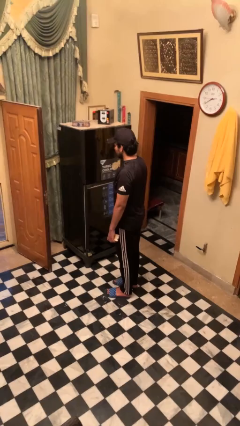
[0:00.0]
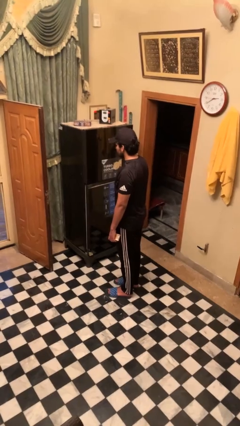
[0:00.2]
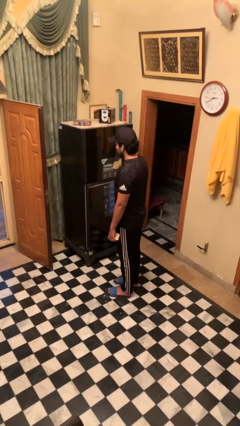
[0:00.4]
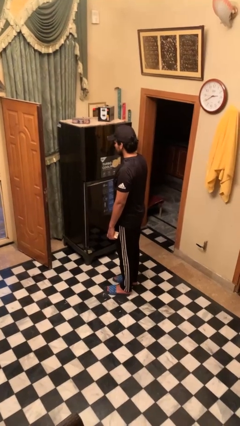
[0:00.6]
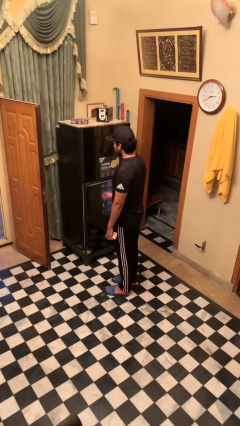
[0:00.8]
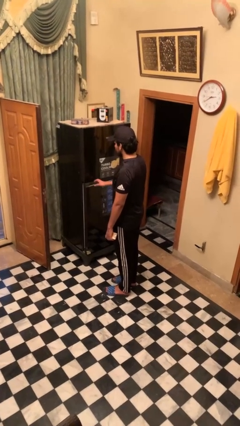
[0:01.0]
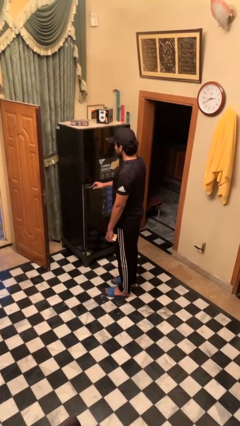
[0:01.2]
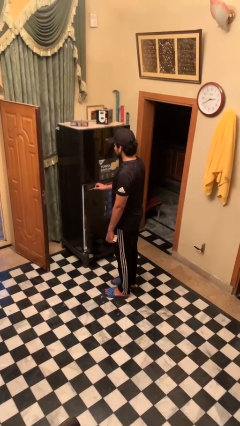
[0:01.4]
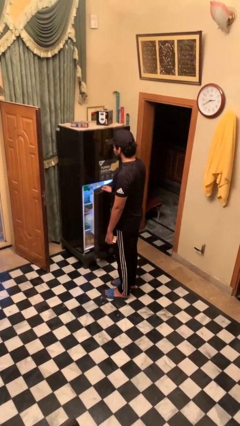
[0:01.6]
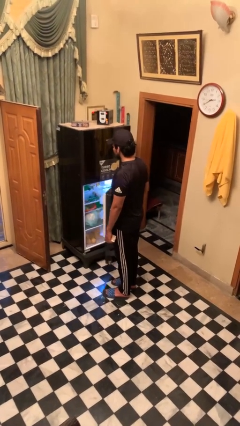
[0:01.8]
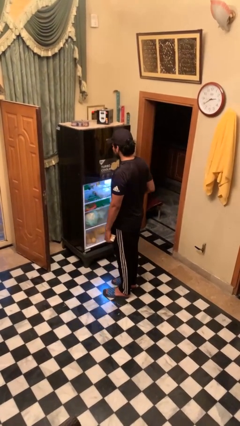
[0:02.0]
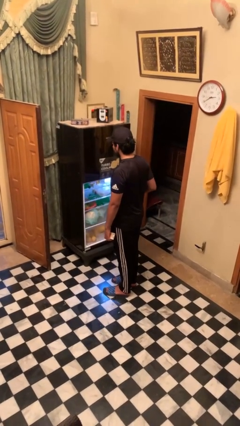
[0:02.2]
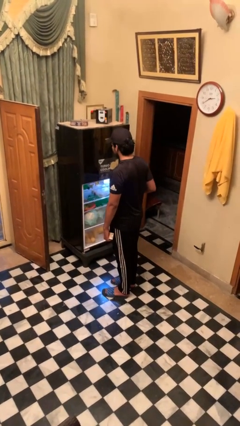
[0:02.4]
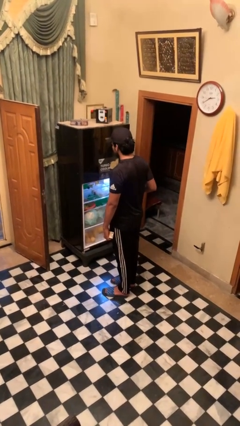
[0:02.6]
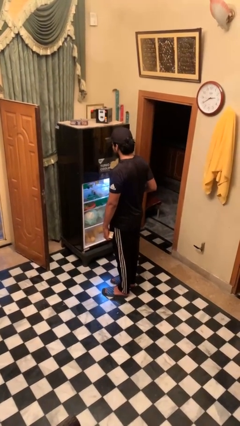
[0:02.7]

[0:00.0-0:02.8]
person opens refrigerator

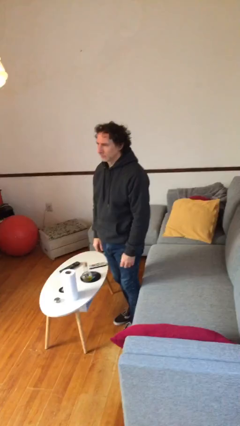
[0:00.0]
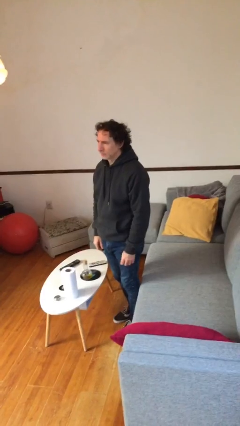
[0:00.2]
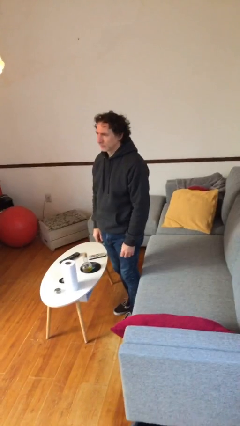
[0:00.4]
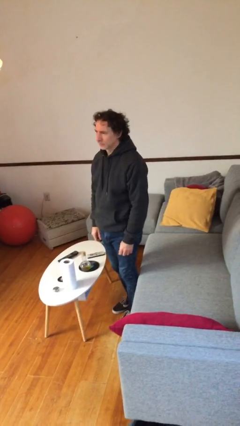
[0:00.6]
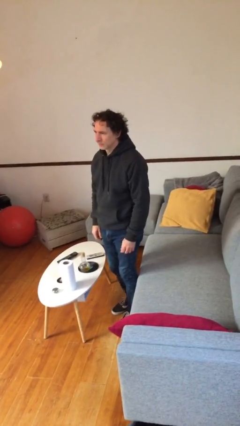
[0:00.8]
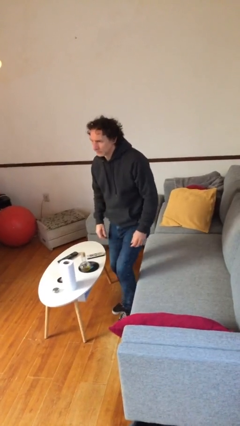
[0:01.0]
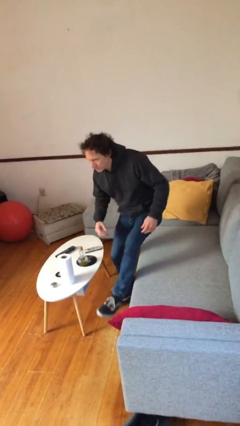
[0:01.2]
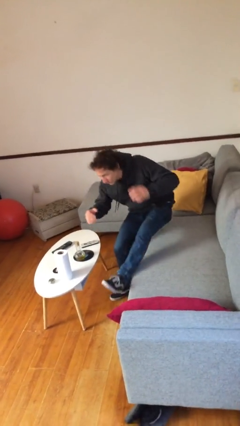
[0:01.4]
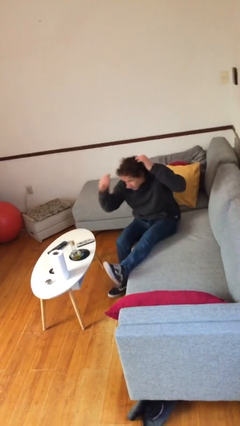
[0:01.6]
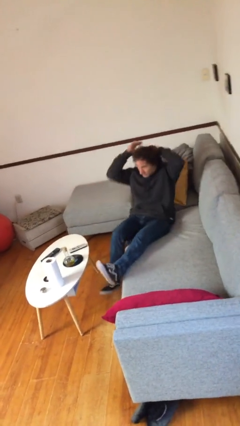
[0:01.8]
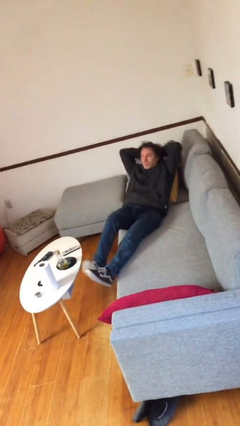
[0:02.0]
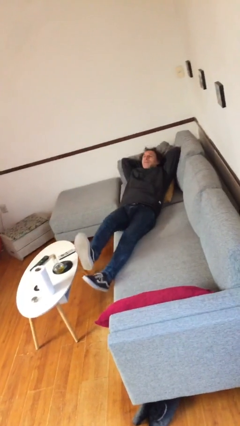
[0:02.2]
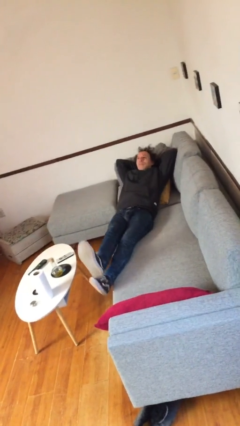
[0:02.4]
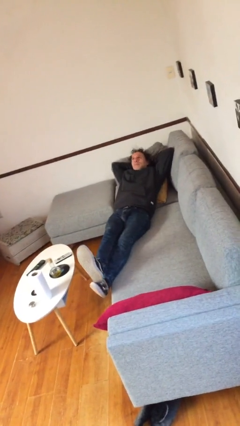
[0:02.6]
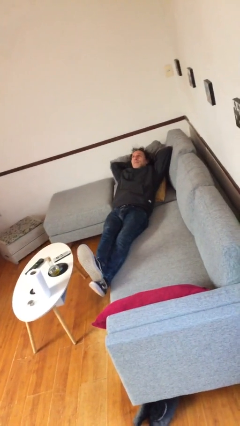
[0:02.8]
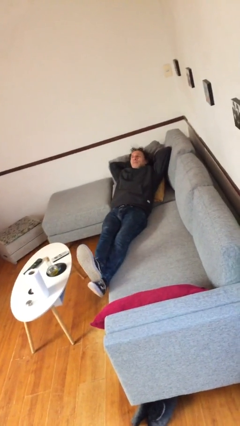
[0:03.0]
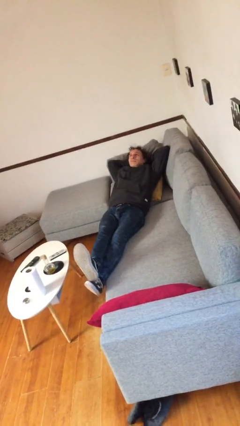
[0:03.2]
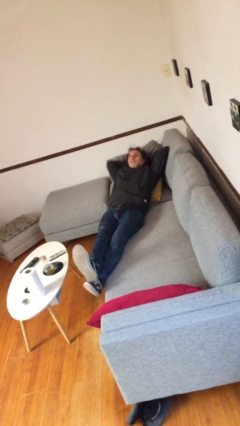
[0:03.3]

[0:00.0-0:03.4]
person lies down on couch

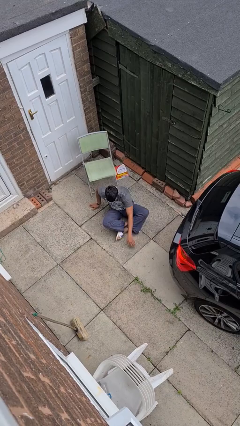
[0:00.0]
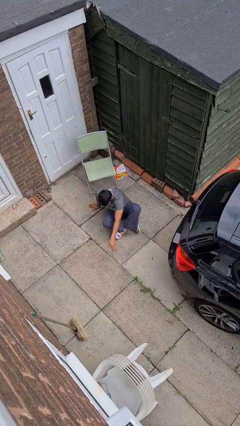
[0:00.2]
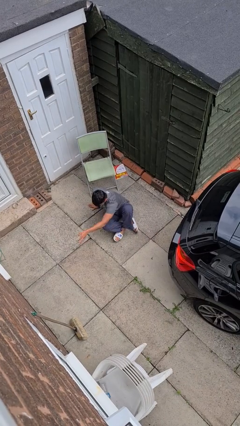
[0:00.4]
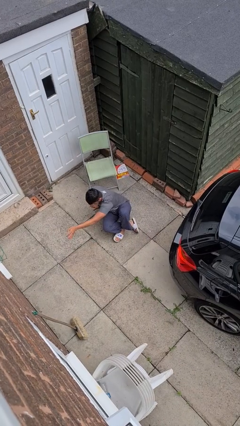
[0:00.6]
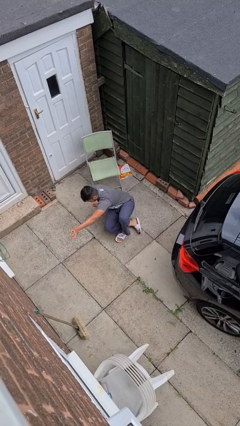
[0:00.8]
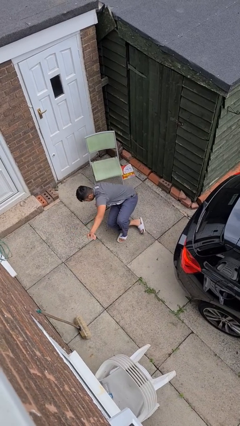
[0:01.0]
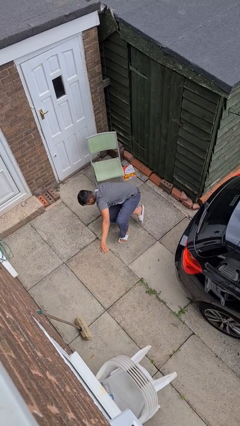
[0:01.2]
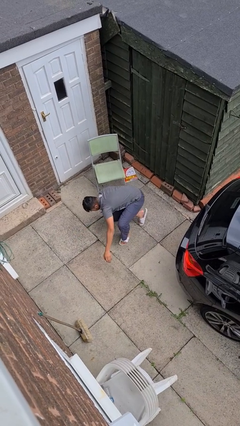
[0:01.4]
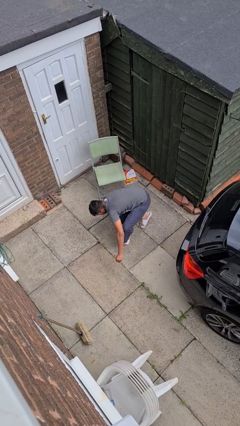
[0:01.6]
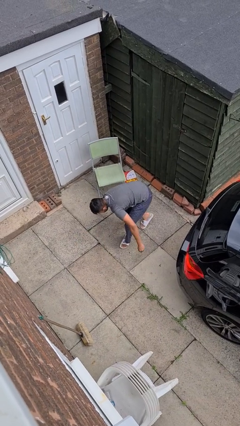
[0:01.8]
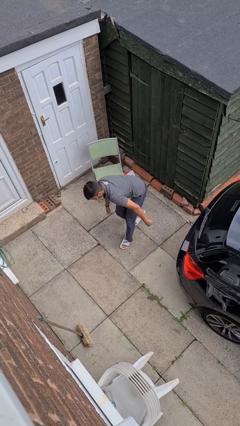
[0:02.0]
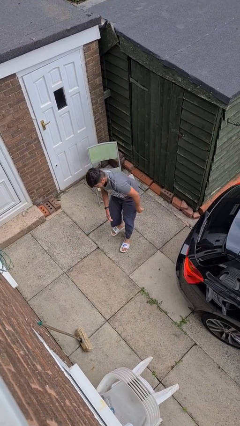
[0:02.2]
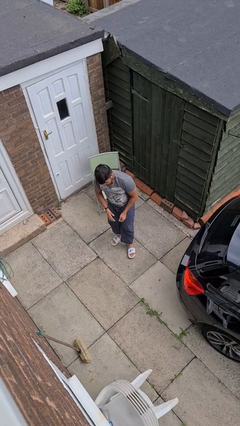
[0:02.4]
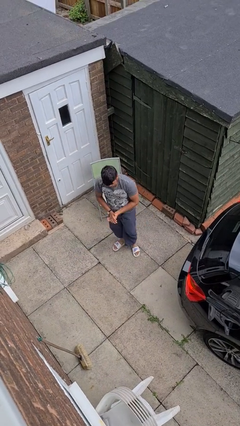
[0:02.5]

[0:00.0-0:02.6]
person stands up from floor

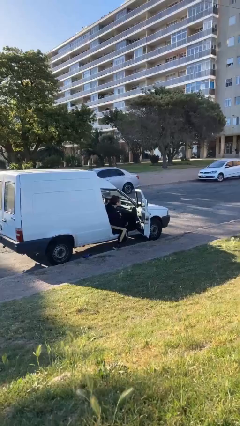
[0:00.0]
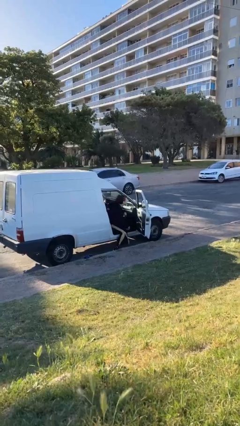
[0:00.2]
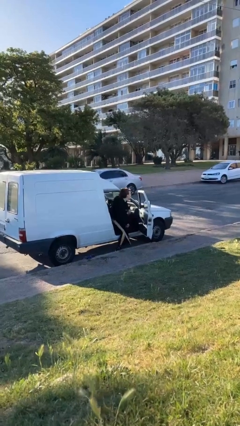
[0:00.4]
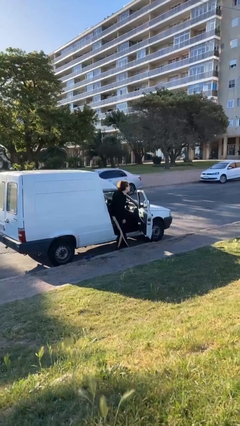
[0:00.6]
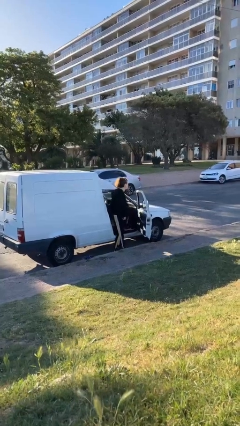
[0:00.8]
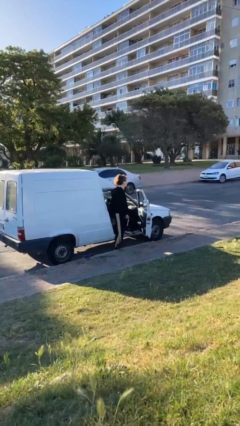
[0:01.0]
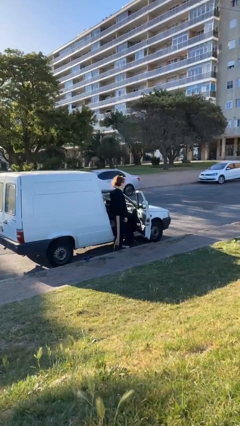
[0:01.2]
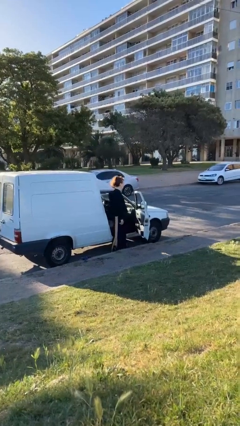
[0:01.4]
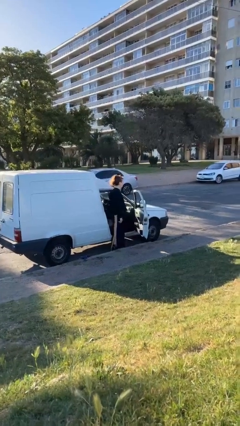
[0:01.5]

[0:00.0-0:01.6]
person exits car

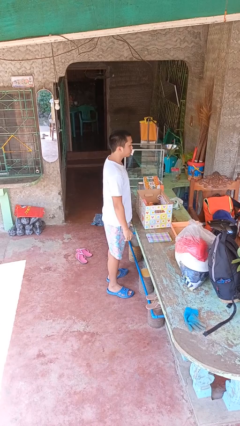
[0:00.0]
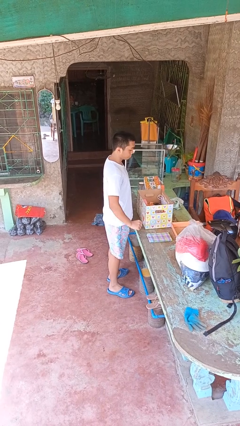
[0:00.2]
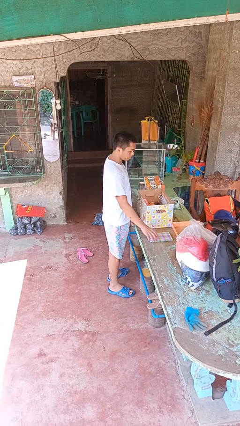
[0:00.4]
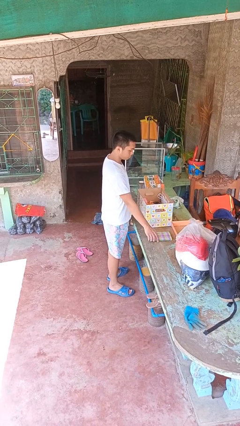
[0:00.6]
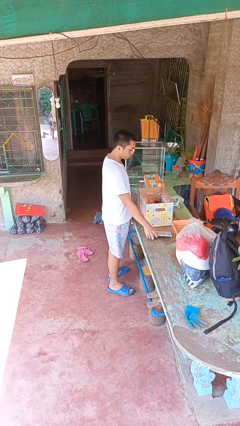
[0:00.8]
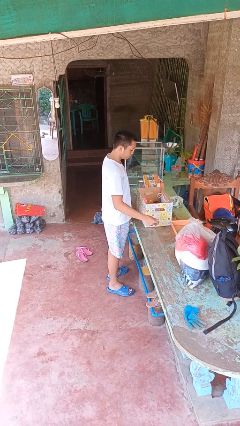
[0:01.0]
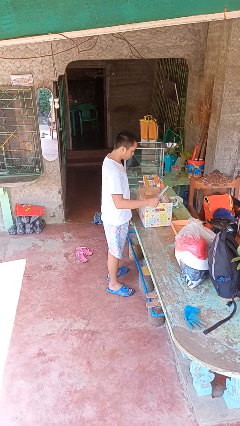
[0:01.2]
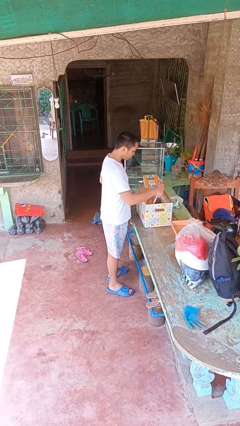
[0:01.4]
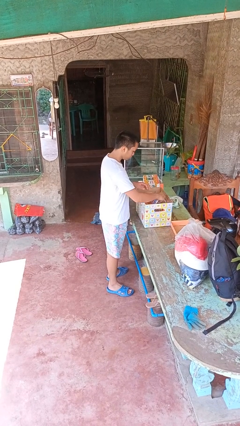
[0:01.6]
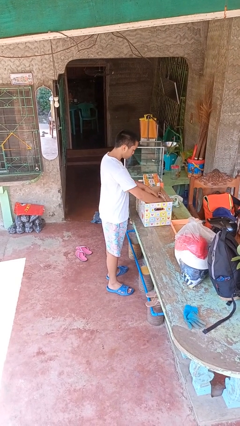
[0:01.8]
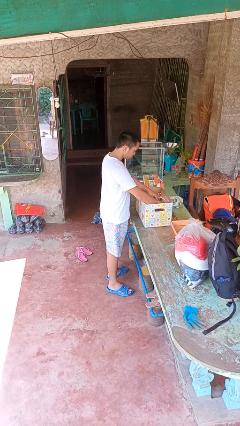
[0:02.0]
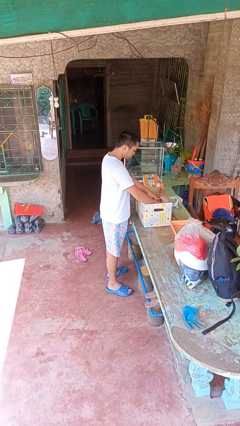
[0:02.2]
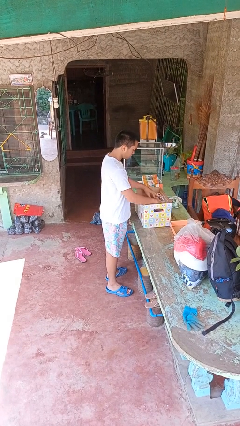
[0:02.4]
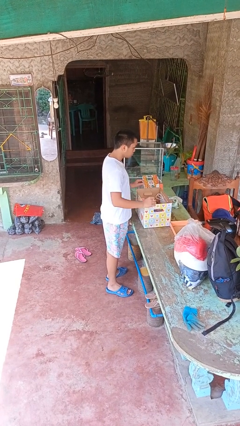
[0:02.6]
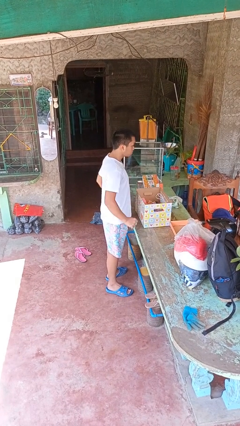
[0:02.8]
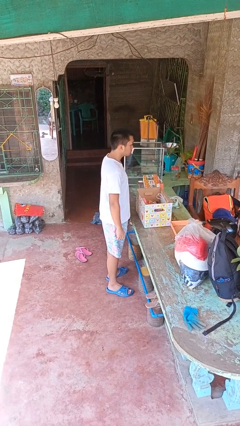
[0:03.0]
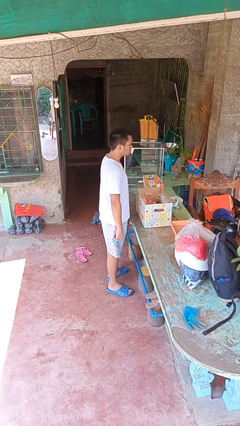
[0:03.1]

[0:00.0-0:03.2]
person puts object into box

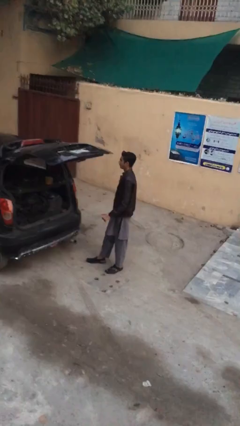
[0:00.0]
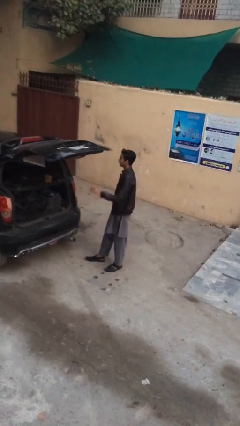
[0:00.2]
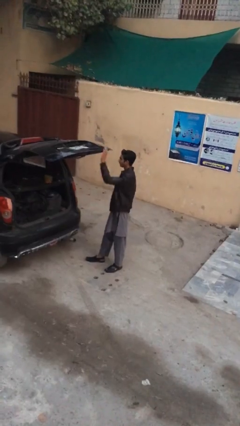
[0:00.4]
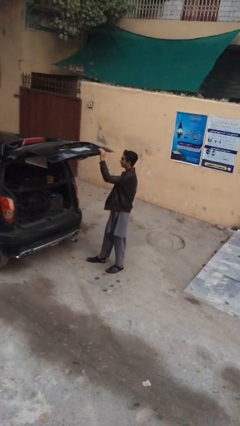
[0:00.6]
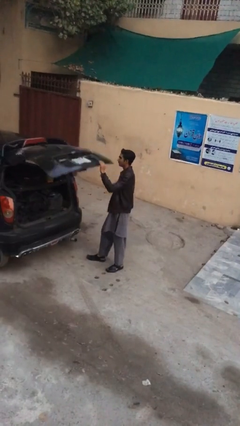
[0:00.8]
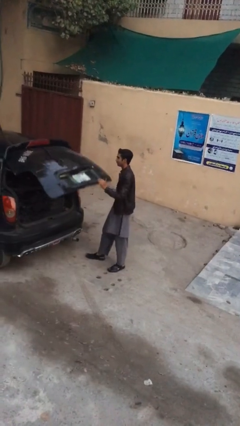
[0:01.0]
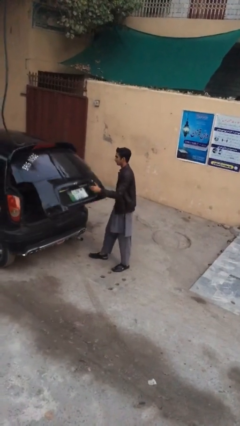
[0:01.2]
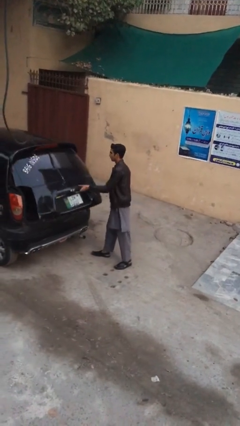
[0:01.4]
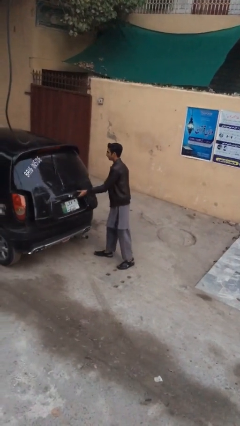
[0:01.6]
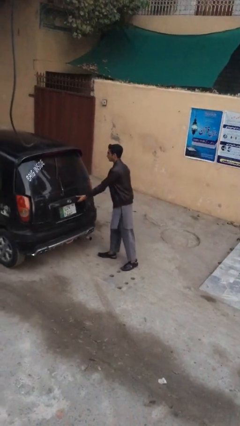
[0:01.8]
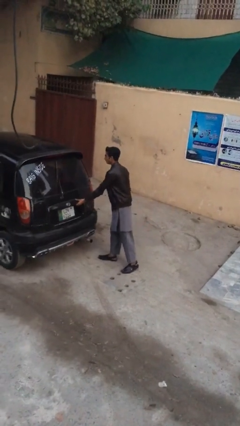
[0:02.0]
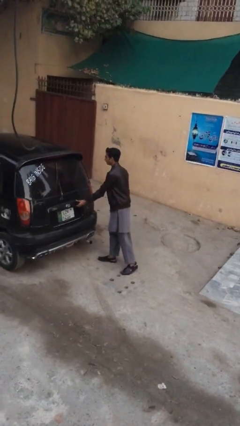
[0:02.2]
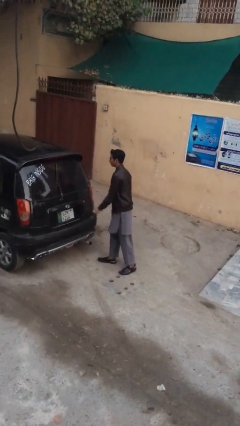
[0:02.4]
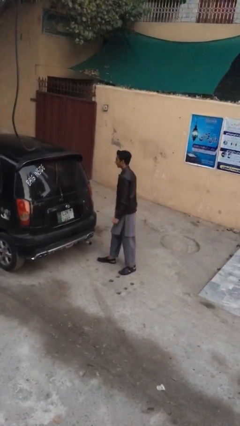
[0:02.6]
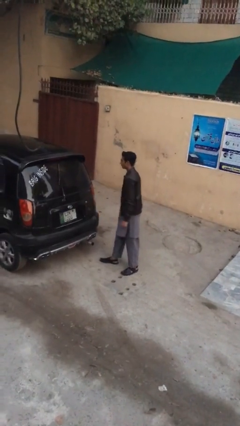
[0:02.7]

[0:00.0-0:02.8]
person closes car trunk

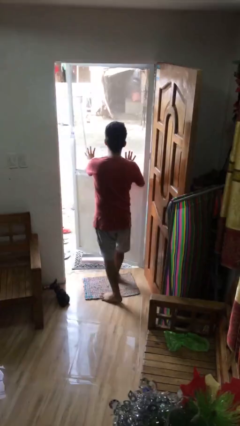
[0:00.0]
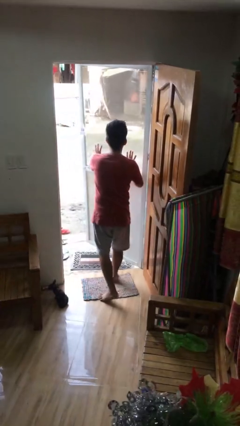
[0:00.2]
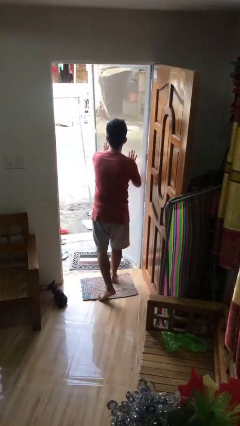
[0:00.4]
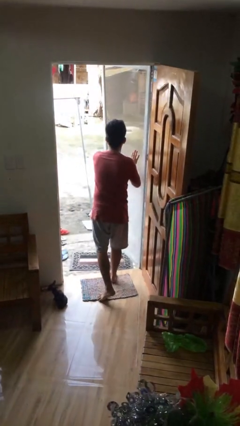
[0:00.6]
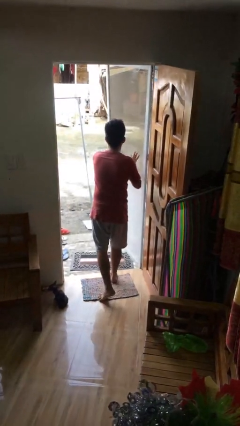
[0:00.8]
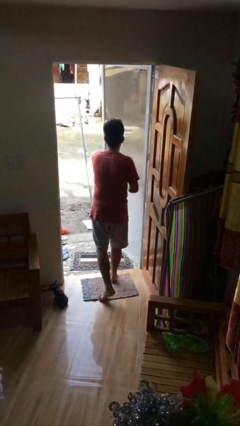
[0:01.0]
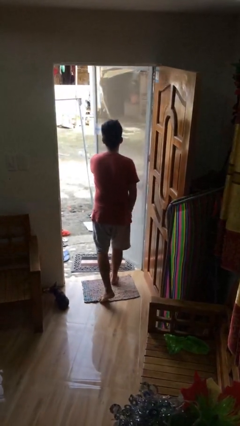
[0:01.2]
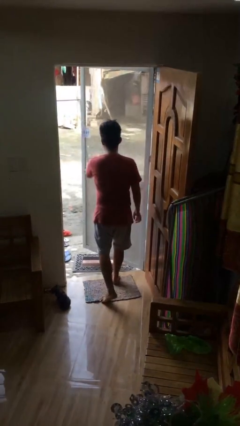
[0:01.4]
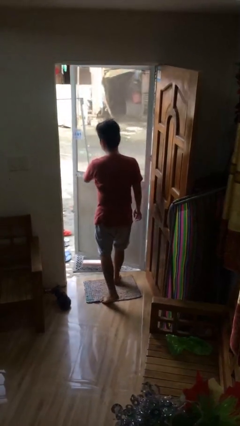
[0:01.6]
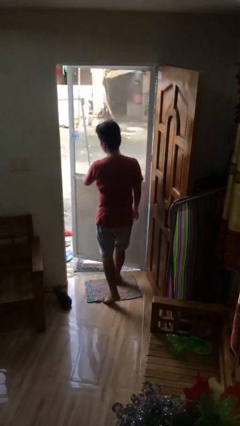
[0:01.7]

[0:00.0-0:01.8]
person opens facility door
